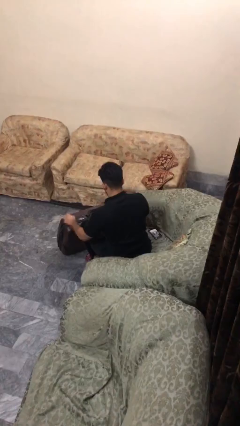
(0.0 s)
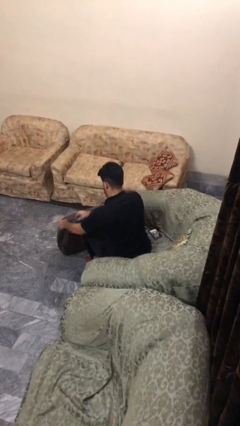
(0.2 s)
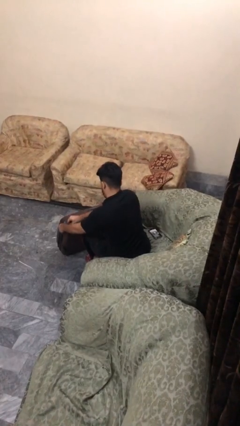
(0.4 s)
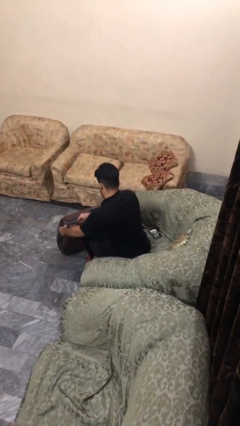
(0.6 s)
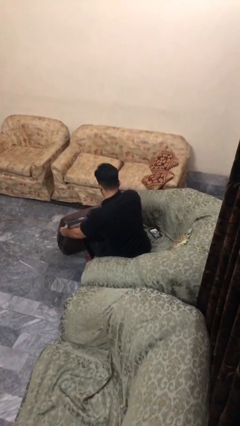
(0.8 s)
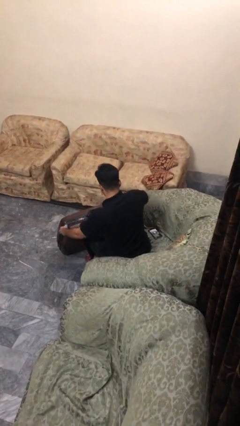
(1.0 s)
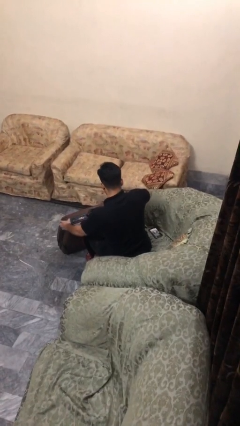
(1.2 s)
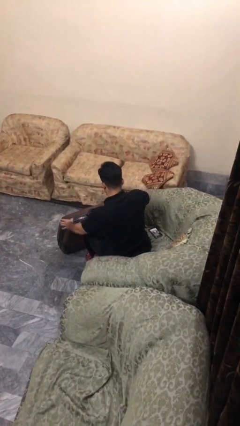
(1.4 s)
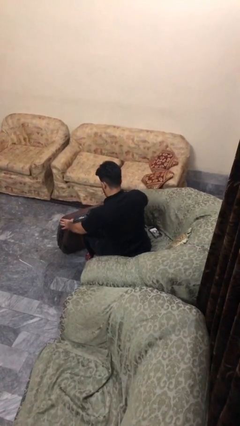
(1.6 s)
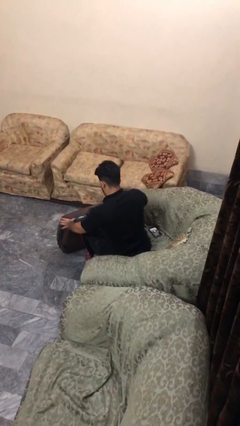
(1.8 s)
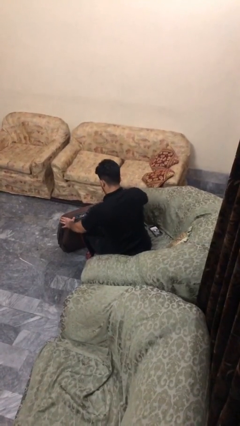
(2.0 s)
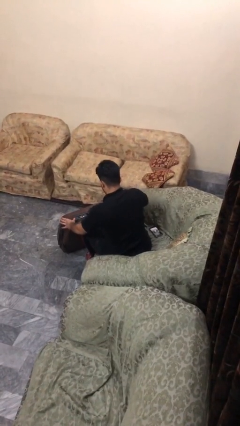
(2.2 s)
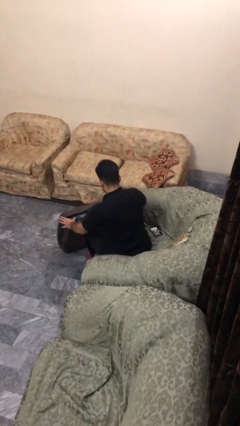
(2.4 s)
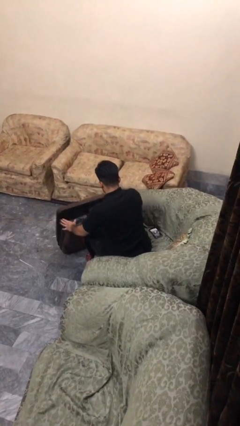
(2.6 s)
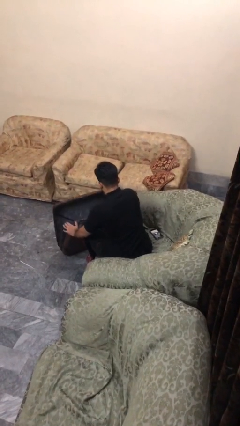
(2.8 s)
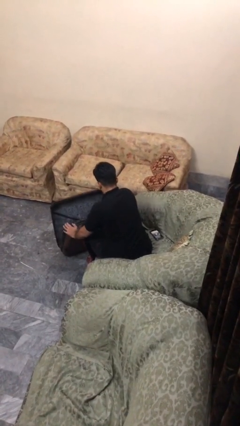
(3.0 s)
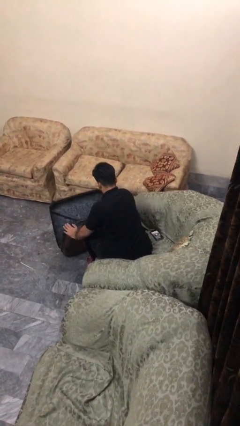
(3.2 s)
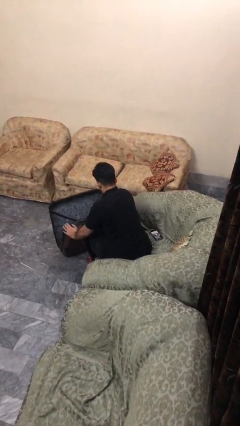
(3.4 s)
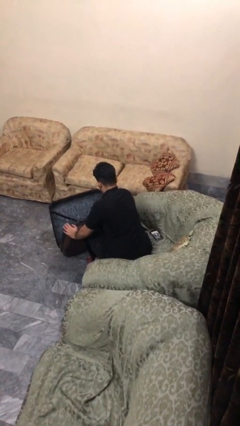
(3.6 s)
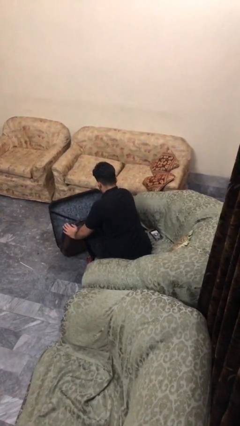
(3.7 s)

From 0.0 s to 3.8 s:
person opens suitcase

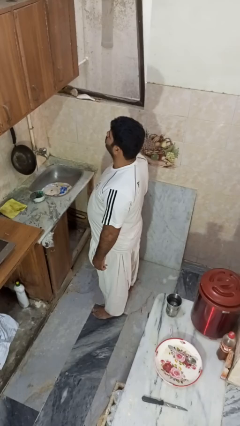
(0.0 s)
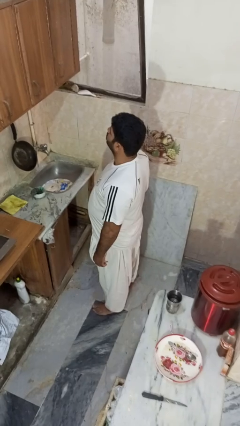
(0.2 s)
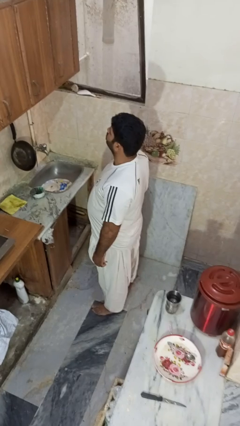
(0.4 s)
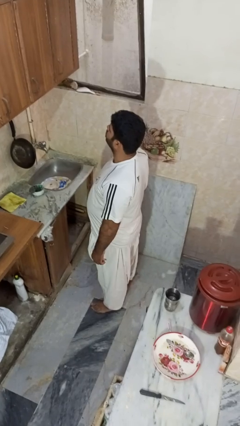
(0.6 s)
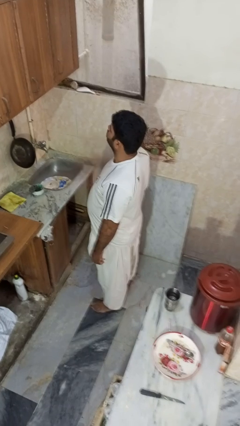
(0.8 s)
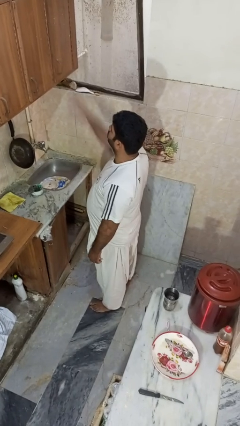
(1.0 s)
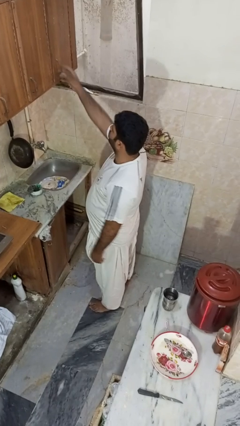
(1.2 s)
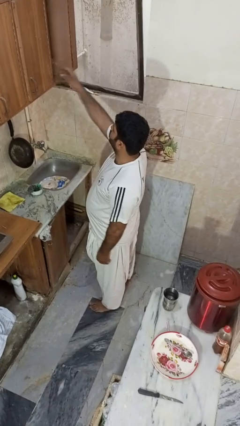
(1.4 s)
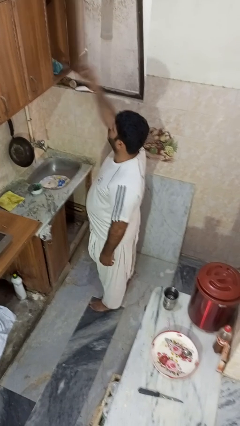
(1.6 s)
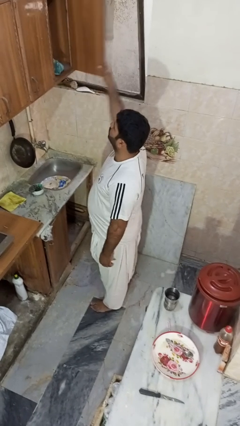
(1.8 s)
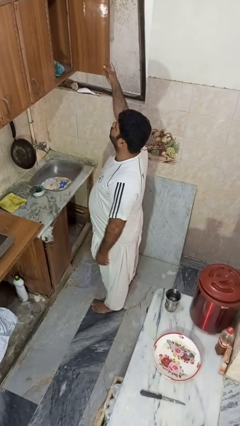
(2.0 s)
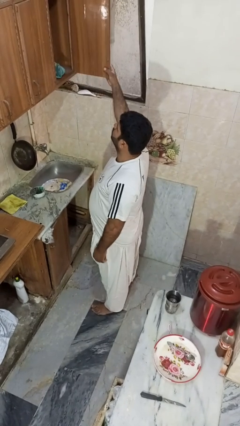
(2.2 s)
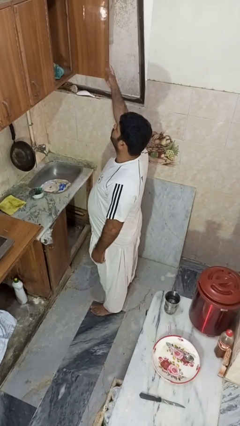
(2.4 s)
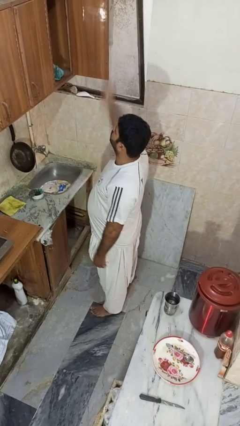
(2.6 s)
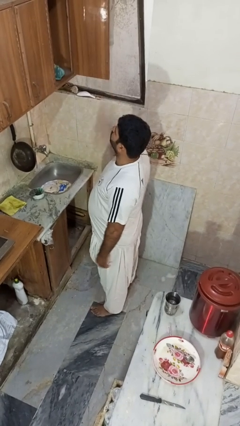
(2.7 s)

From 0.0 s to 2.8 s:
person opens cabinet

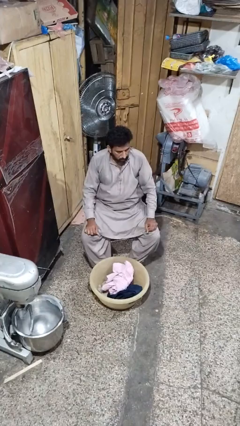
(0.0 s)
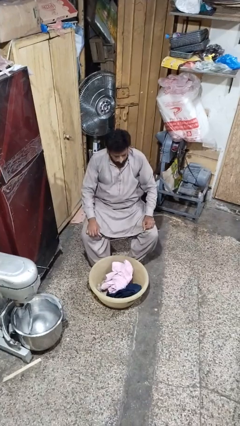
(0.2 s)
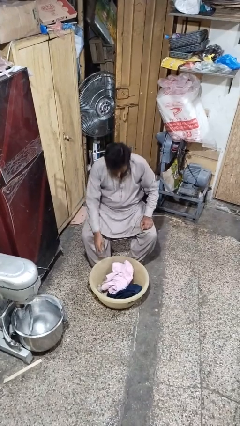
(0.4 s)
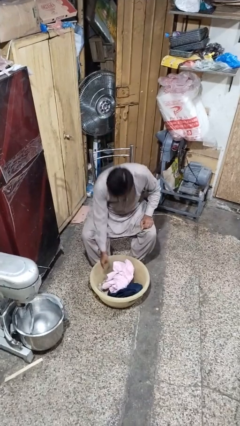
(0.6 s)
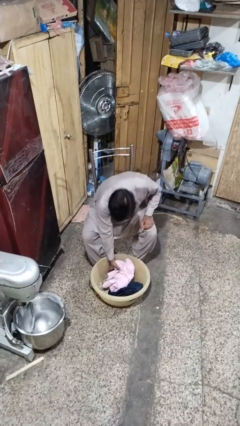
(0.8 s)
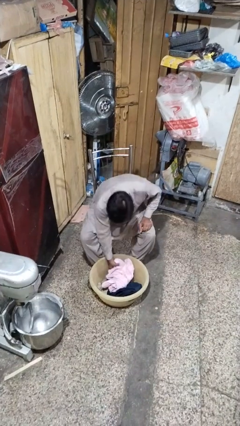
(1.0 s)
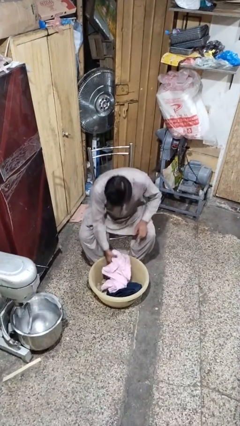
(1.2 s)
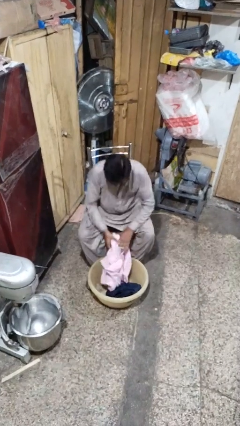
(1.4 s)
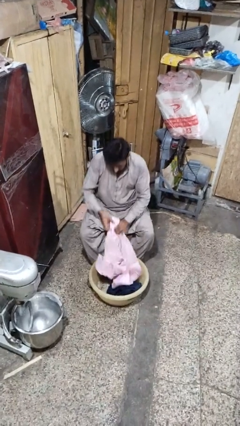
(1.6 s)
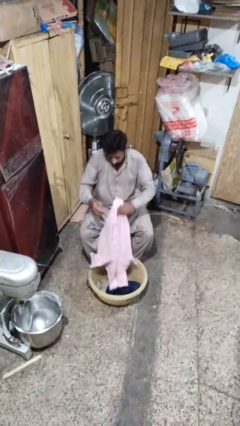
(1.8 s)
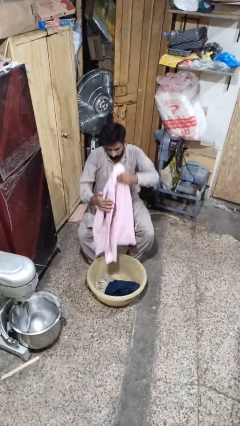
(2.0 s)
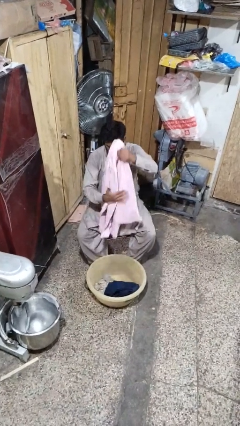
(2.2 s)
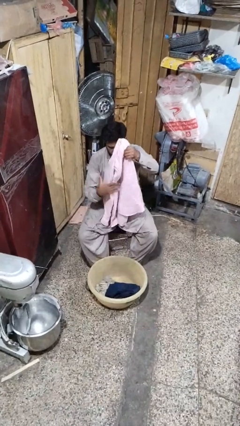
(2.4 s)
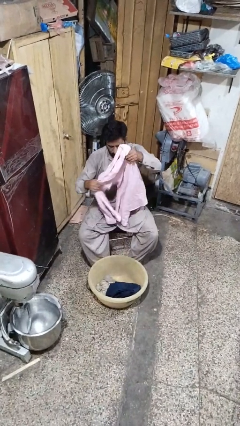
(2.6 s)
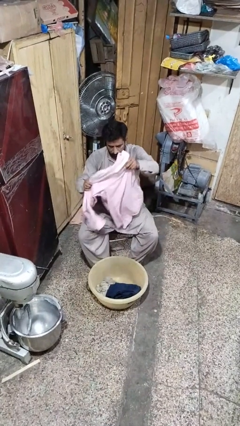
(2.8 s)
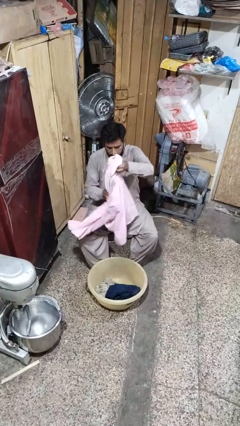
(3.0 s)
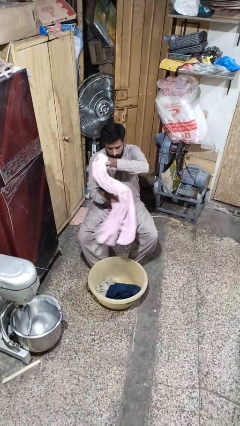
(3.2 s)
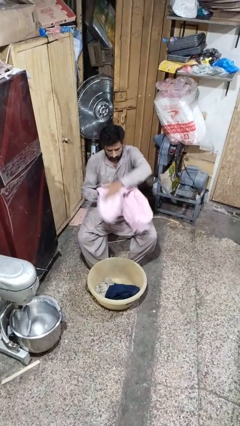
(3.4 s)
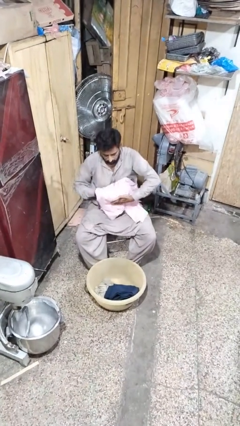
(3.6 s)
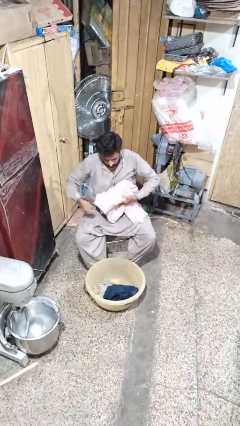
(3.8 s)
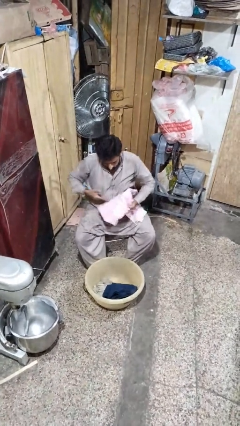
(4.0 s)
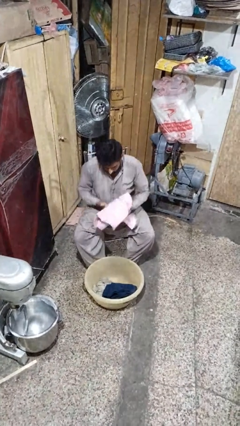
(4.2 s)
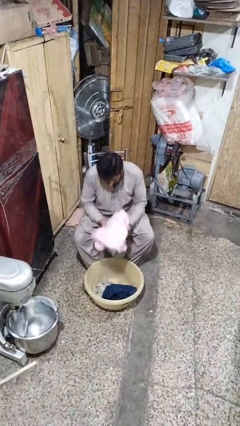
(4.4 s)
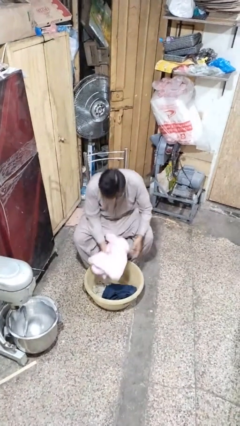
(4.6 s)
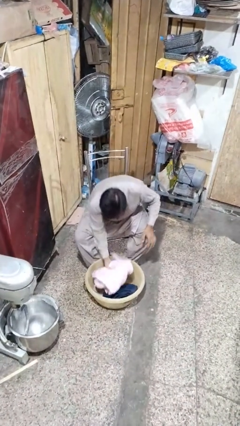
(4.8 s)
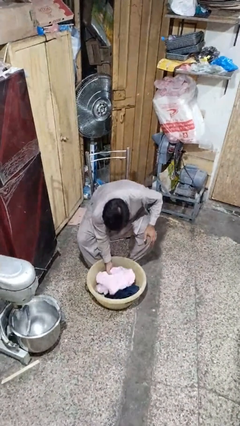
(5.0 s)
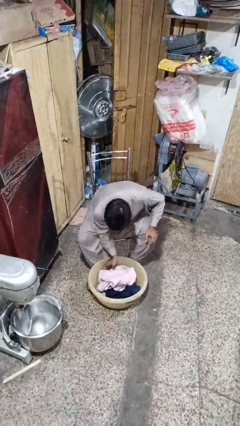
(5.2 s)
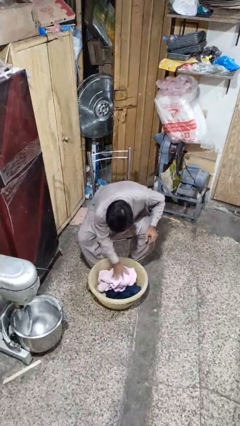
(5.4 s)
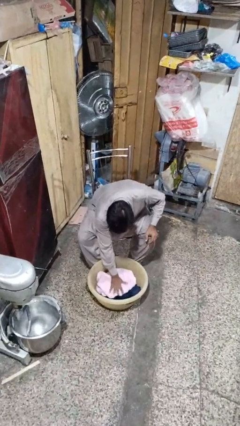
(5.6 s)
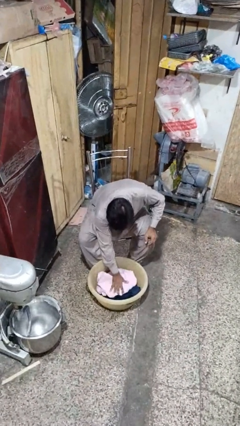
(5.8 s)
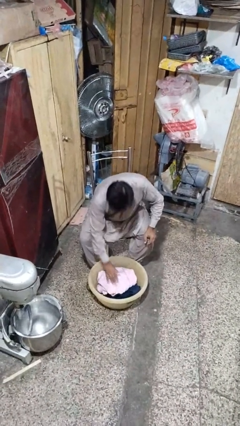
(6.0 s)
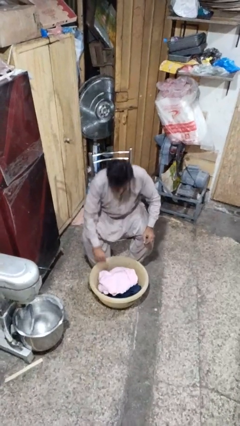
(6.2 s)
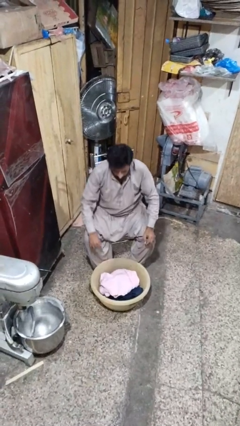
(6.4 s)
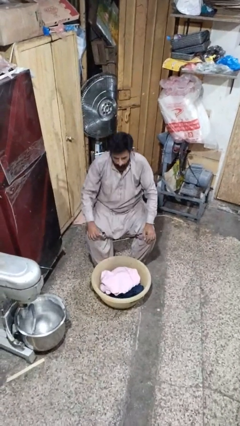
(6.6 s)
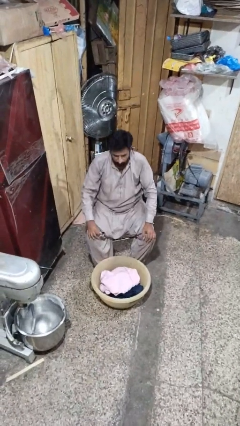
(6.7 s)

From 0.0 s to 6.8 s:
person folds shirt

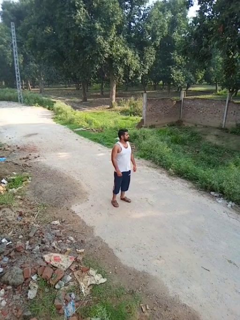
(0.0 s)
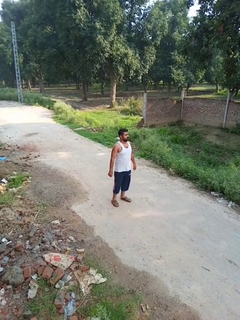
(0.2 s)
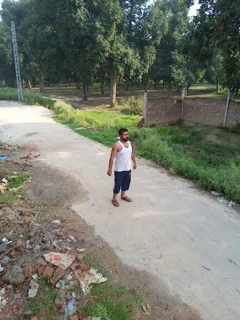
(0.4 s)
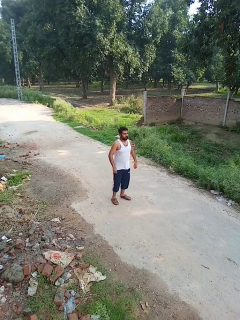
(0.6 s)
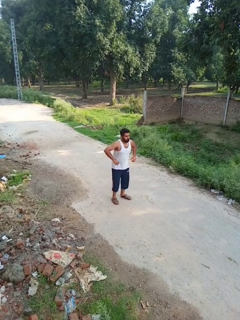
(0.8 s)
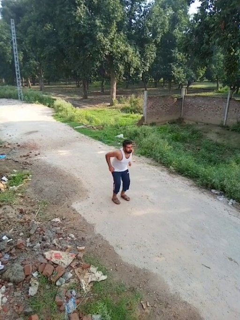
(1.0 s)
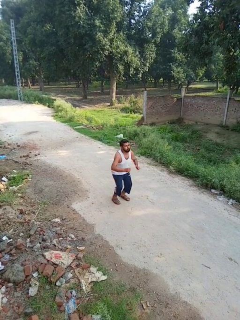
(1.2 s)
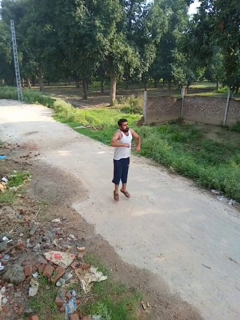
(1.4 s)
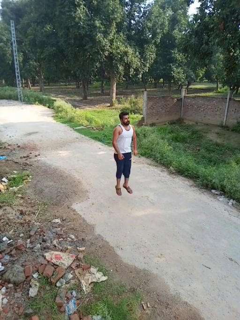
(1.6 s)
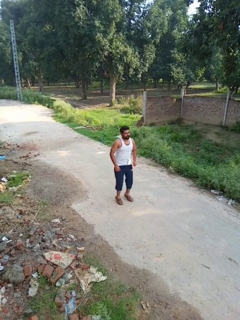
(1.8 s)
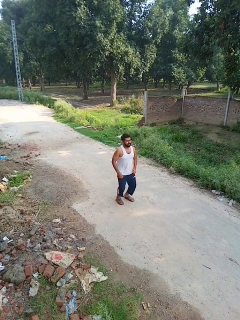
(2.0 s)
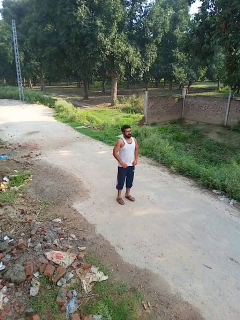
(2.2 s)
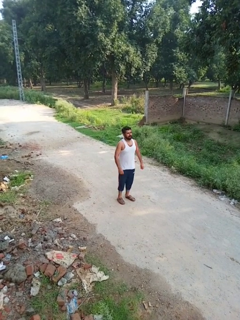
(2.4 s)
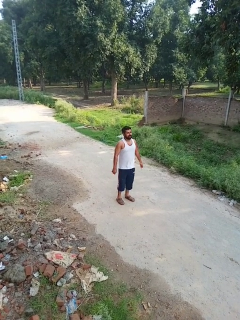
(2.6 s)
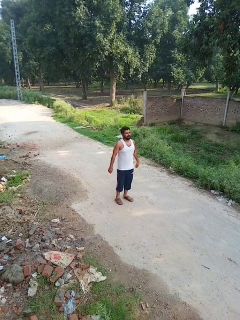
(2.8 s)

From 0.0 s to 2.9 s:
person jumps

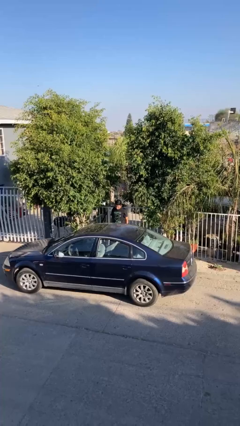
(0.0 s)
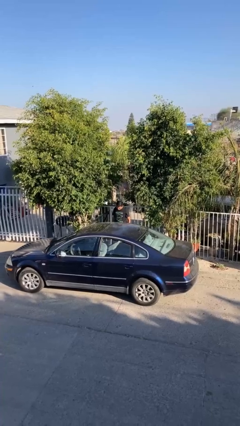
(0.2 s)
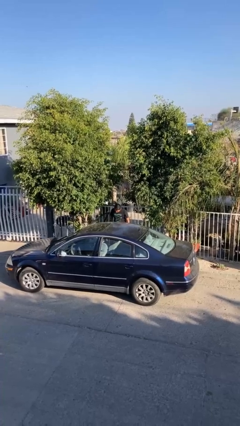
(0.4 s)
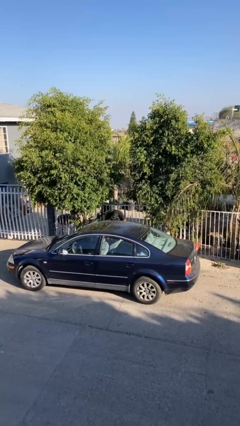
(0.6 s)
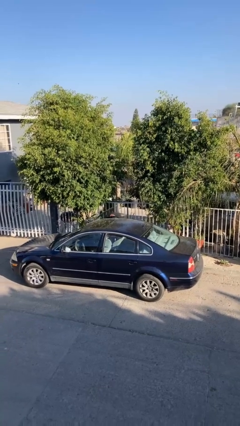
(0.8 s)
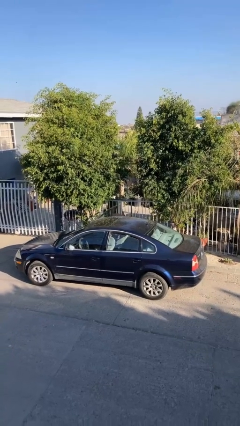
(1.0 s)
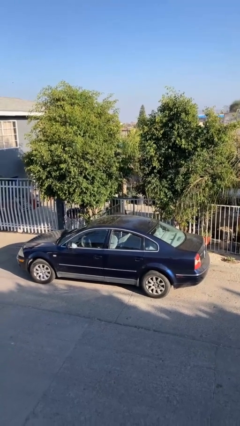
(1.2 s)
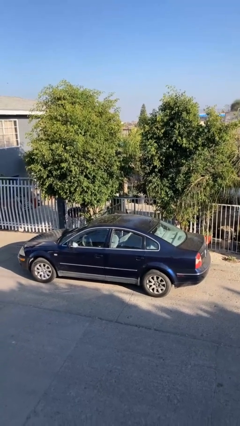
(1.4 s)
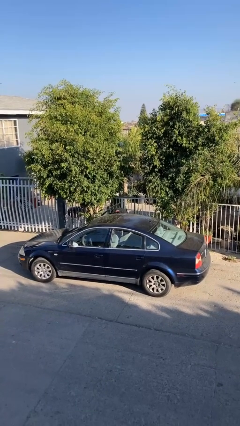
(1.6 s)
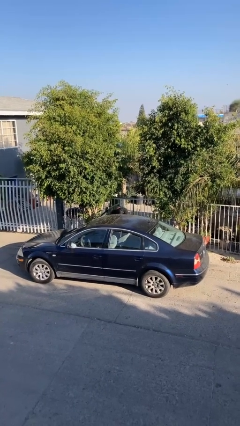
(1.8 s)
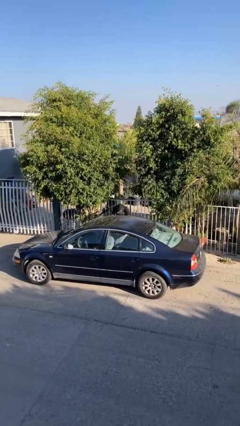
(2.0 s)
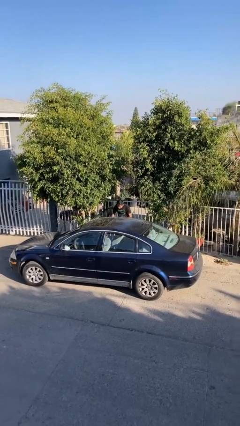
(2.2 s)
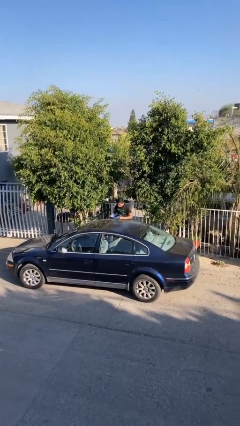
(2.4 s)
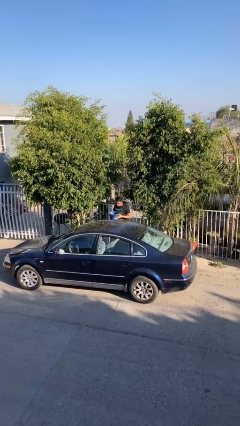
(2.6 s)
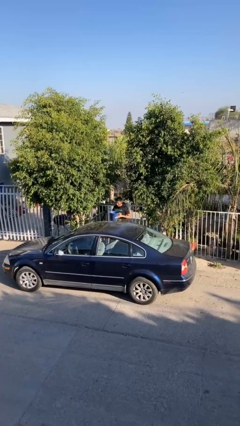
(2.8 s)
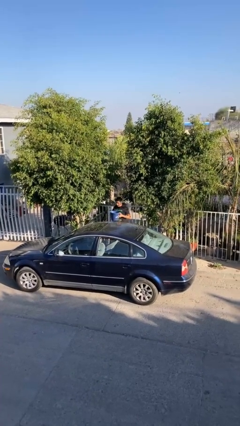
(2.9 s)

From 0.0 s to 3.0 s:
person unloads car
